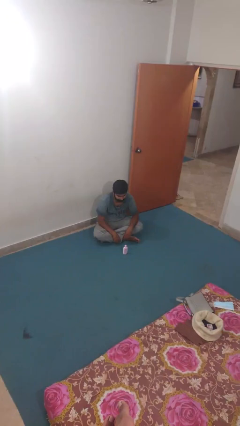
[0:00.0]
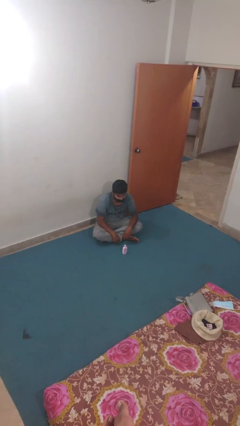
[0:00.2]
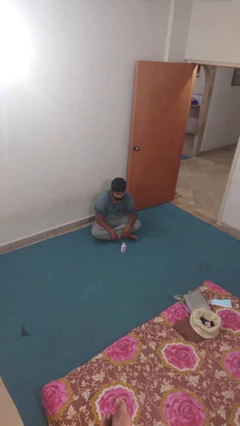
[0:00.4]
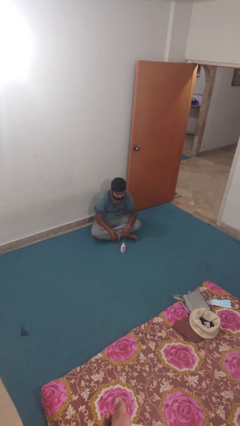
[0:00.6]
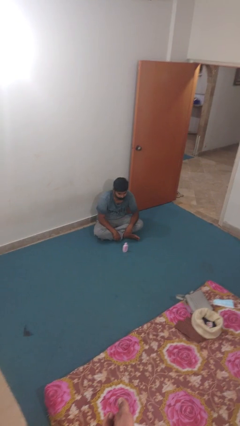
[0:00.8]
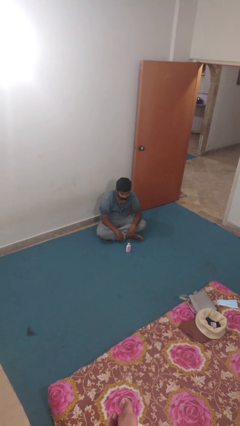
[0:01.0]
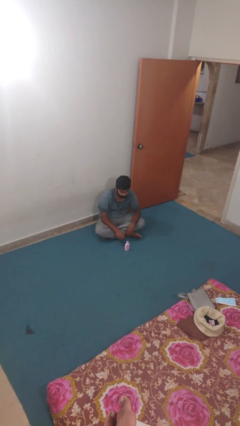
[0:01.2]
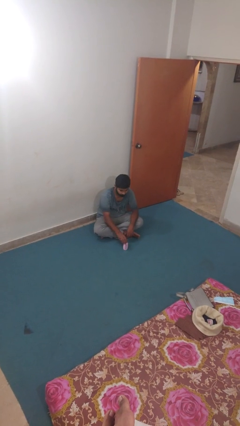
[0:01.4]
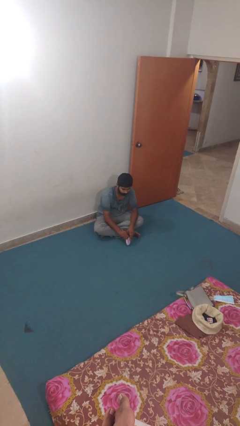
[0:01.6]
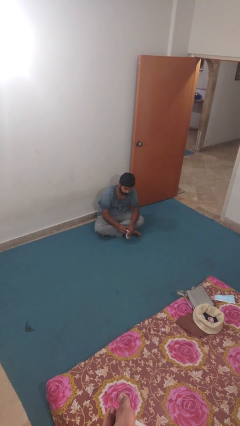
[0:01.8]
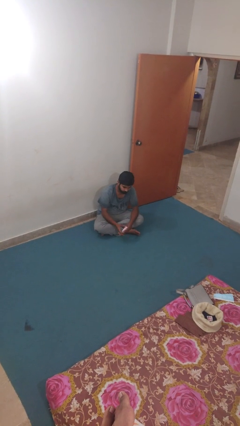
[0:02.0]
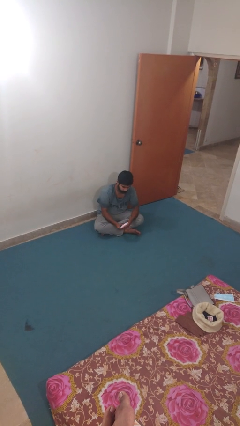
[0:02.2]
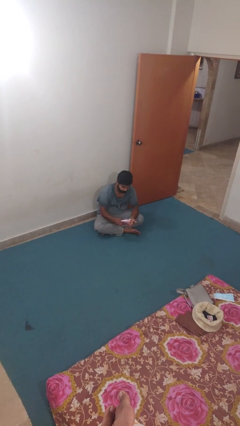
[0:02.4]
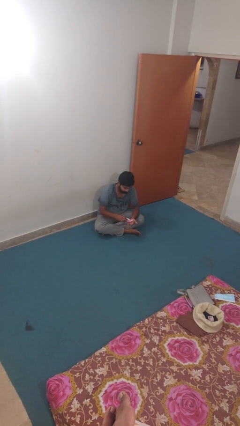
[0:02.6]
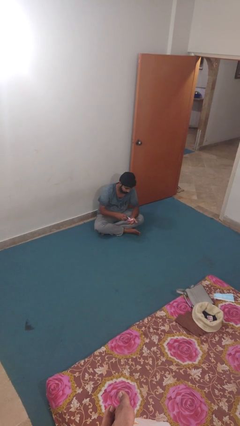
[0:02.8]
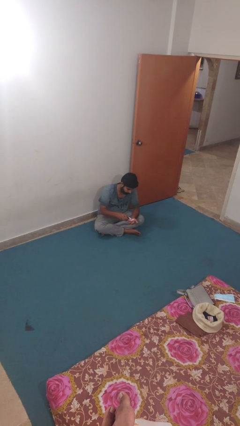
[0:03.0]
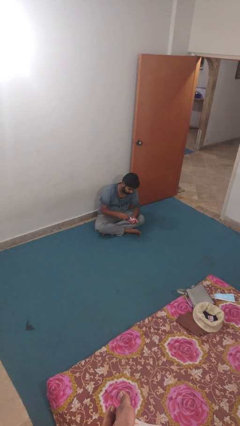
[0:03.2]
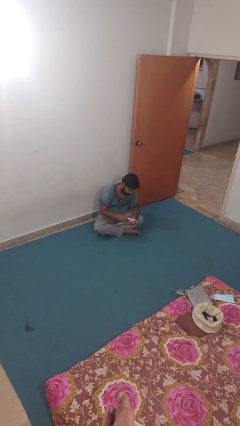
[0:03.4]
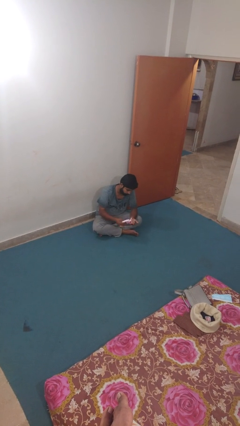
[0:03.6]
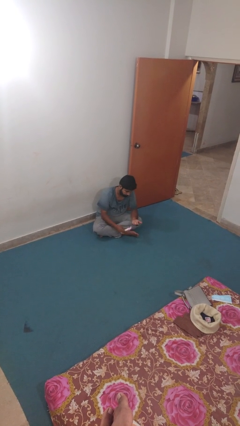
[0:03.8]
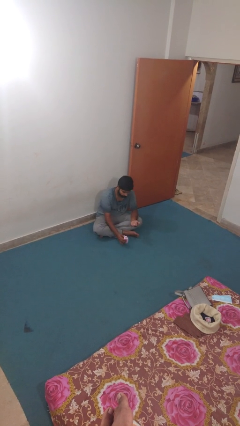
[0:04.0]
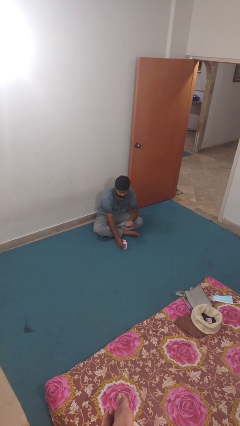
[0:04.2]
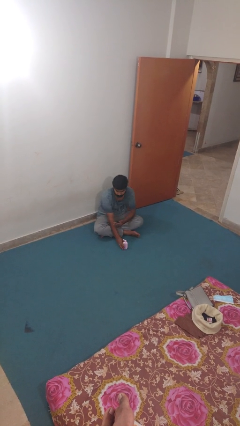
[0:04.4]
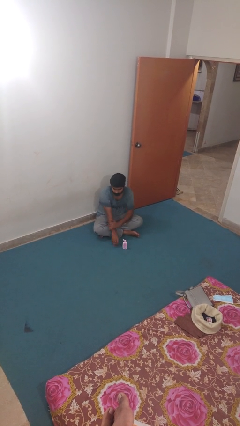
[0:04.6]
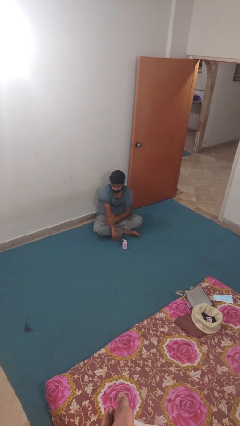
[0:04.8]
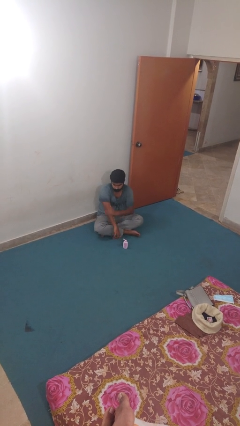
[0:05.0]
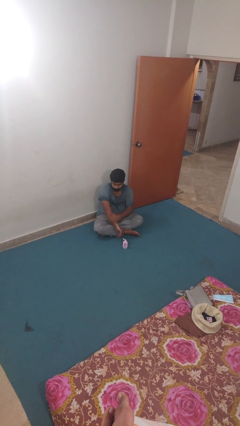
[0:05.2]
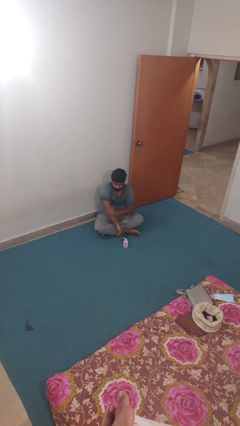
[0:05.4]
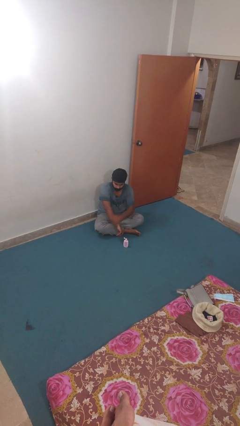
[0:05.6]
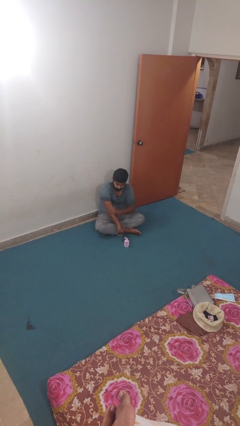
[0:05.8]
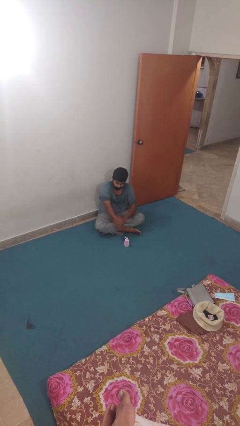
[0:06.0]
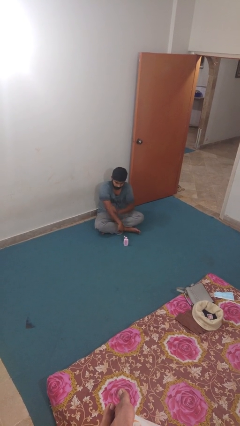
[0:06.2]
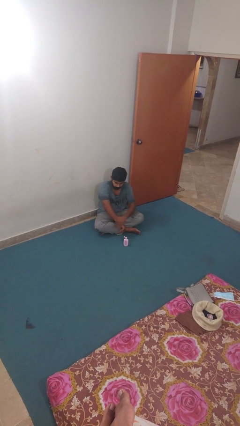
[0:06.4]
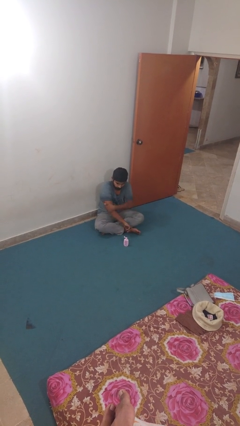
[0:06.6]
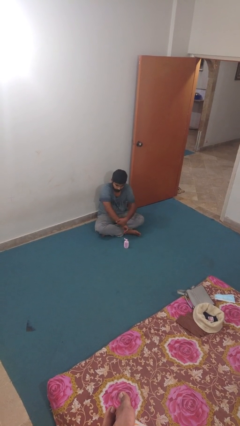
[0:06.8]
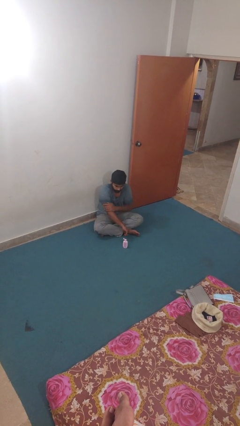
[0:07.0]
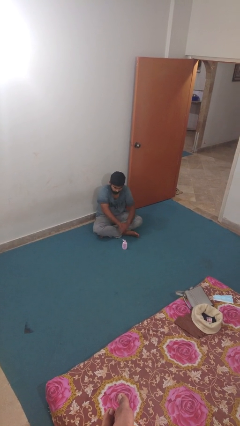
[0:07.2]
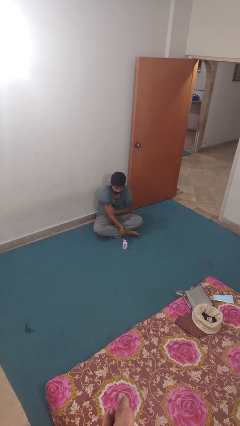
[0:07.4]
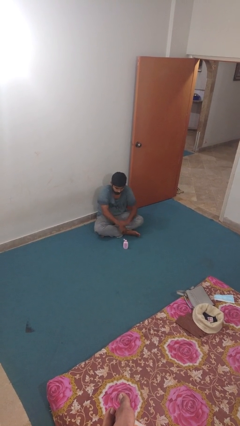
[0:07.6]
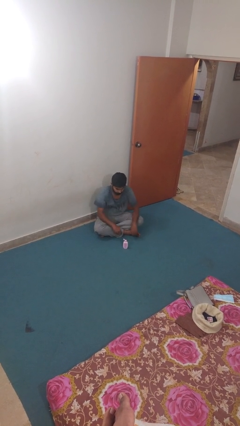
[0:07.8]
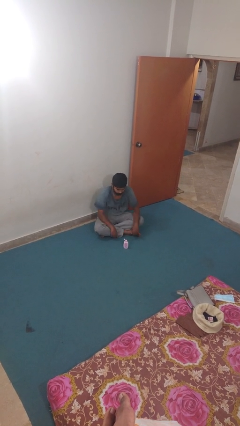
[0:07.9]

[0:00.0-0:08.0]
person applies sunscreen

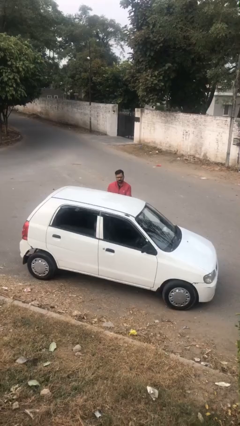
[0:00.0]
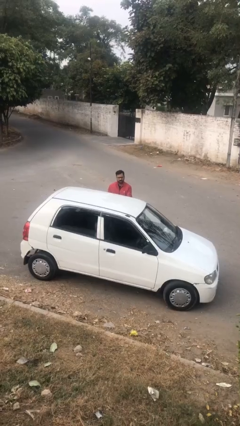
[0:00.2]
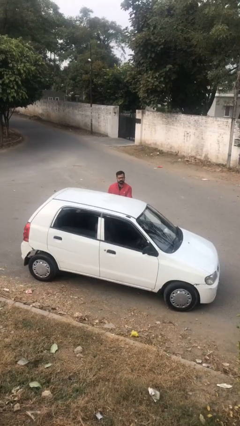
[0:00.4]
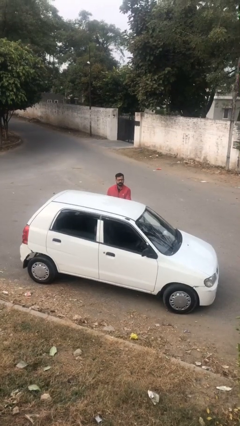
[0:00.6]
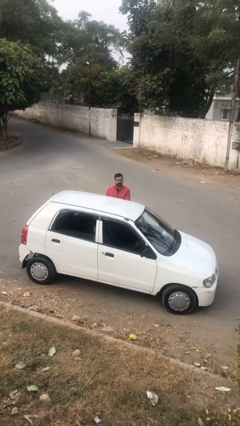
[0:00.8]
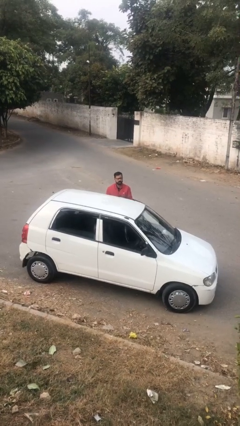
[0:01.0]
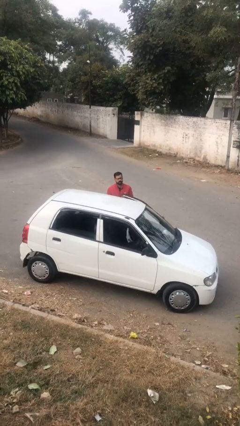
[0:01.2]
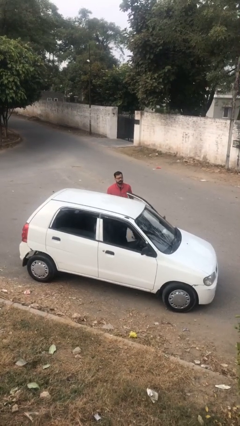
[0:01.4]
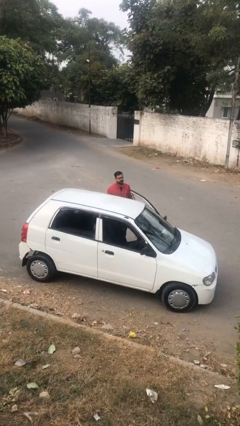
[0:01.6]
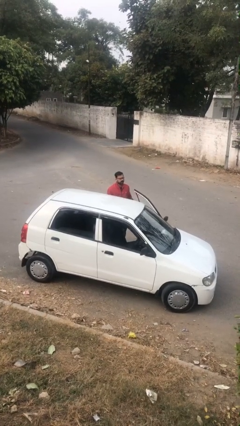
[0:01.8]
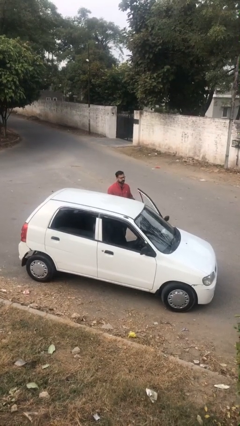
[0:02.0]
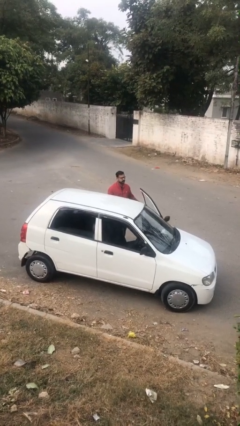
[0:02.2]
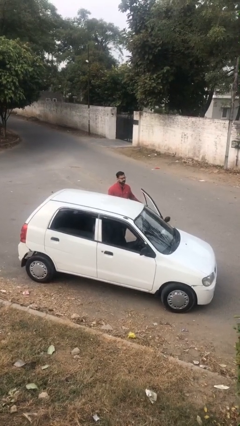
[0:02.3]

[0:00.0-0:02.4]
person opens car door

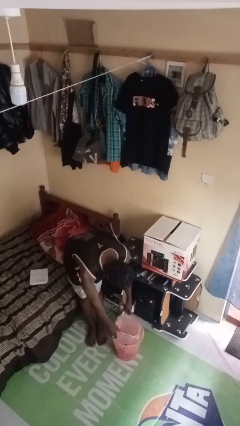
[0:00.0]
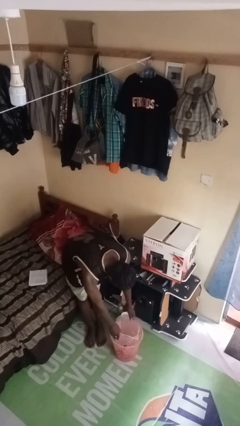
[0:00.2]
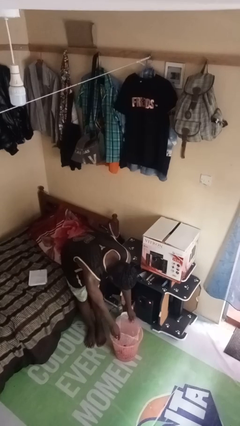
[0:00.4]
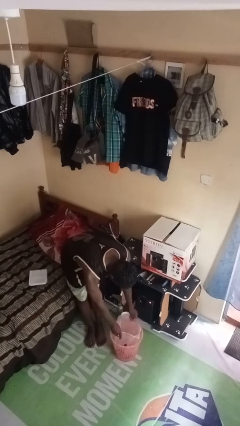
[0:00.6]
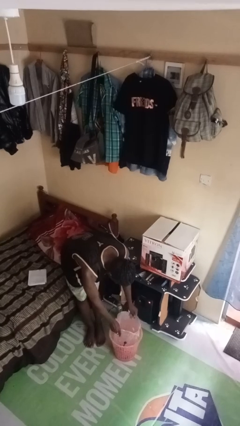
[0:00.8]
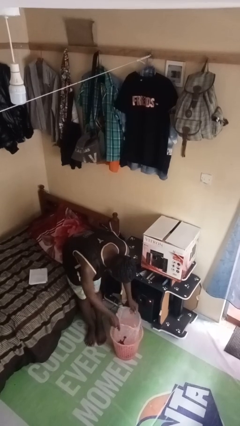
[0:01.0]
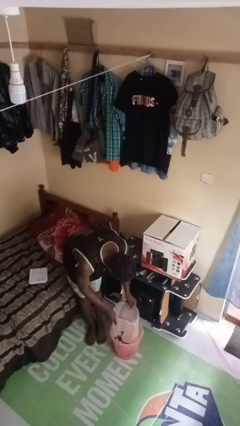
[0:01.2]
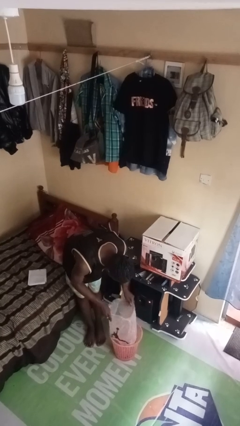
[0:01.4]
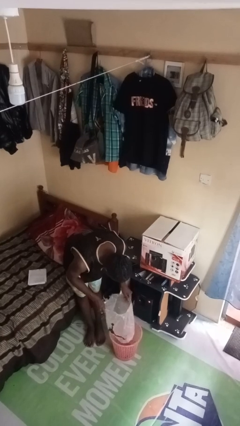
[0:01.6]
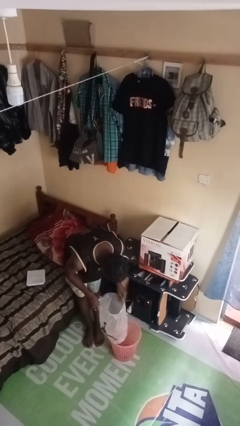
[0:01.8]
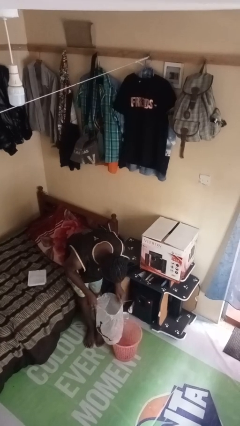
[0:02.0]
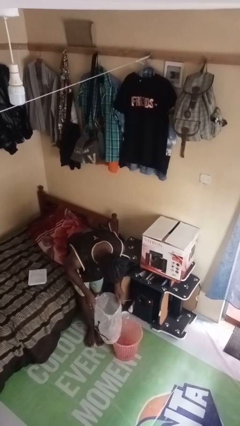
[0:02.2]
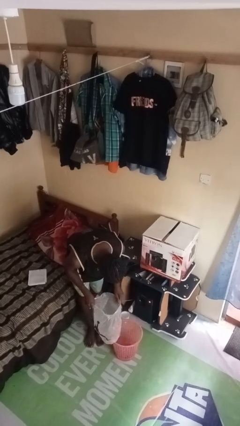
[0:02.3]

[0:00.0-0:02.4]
person removes trashbag from trashcan

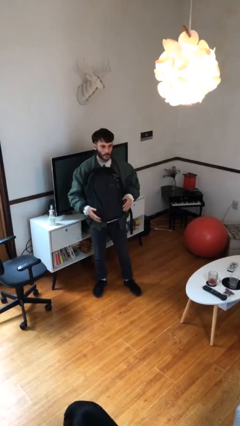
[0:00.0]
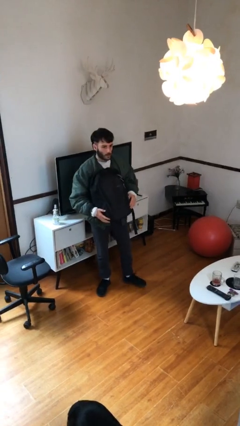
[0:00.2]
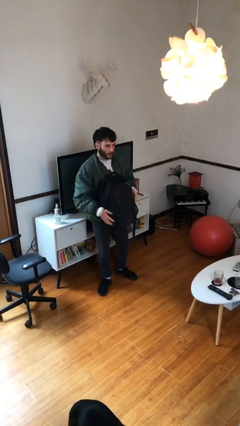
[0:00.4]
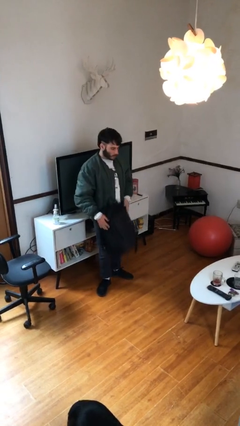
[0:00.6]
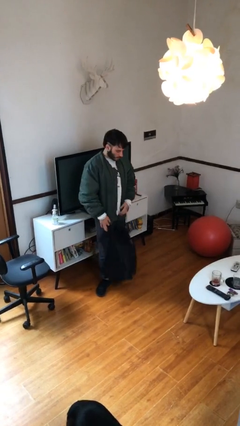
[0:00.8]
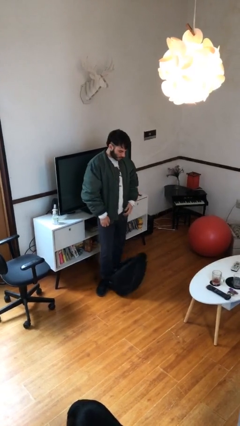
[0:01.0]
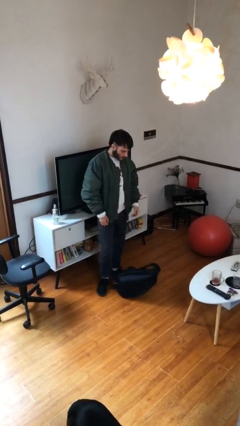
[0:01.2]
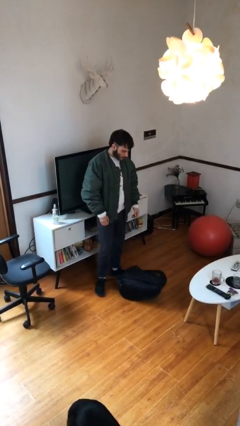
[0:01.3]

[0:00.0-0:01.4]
person drops object

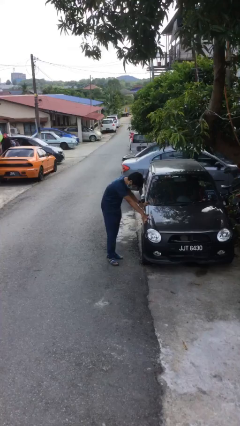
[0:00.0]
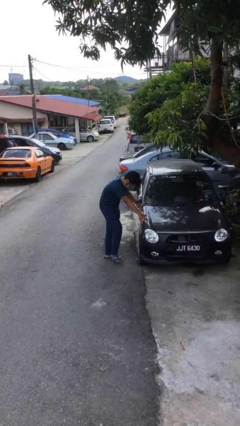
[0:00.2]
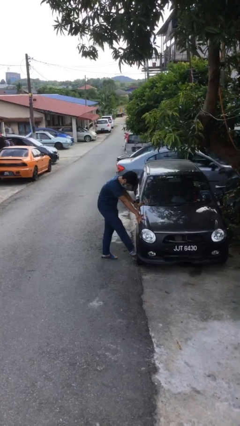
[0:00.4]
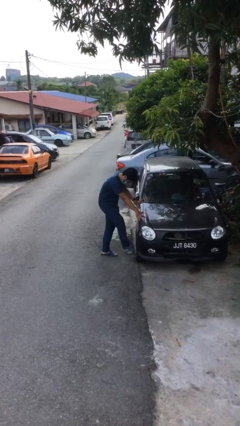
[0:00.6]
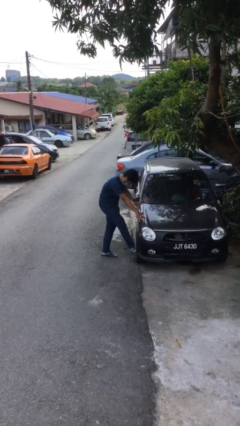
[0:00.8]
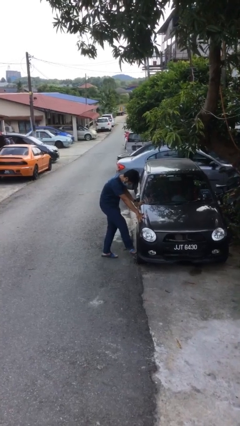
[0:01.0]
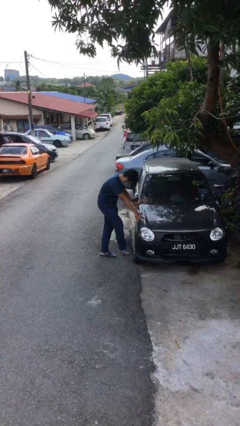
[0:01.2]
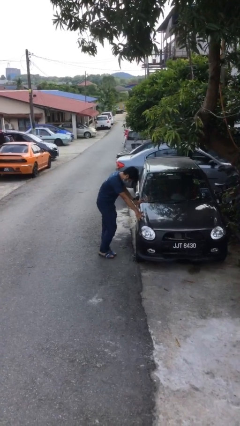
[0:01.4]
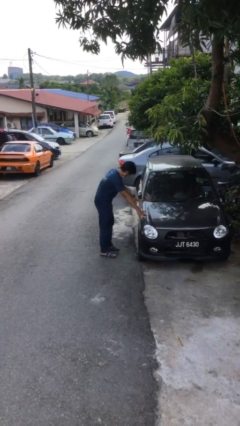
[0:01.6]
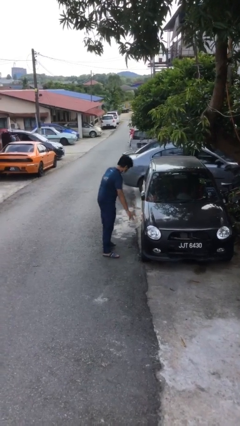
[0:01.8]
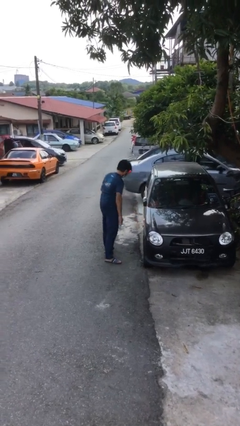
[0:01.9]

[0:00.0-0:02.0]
person kicks car tires

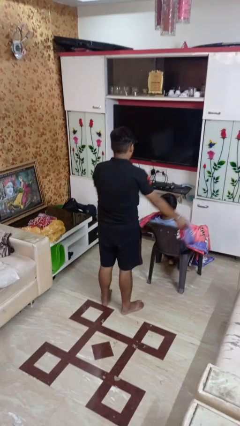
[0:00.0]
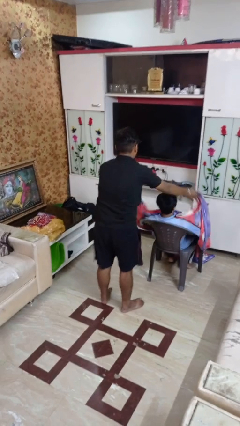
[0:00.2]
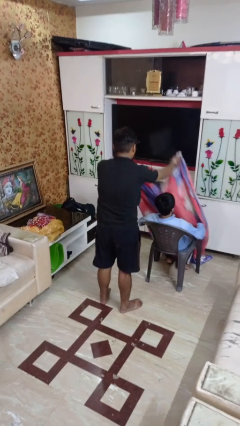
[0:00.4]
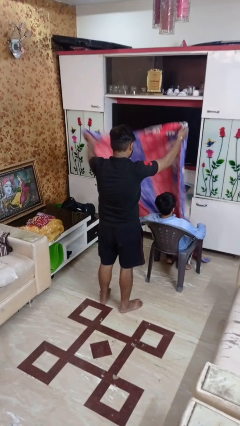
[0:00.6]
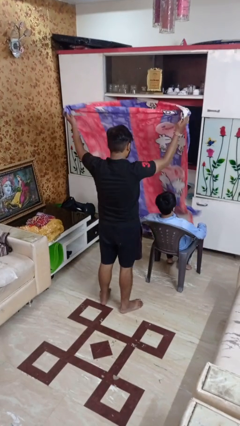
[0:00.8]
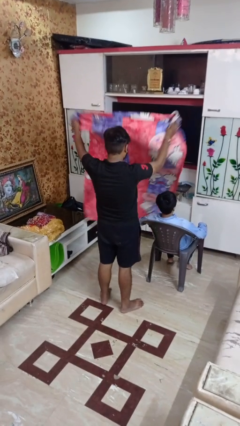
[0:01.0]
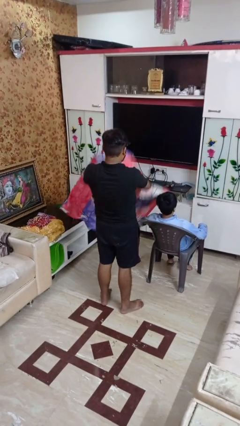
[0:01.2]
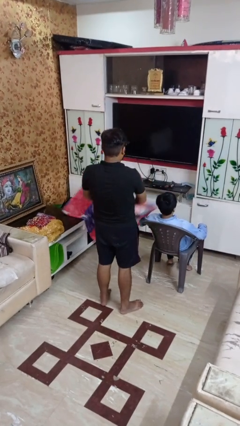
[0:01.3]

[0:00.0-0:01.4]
person uncovers friend with blanket
